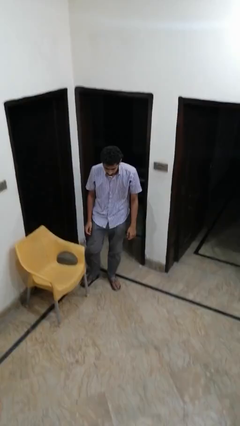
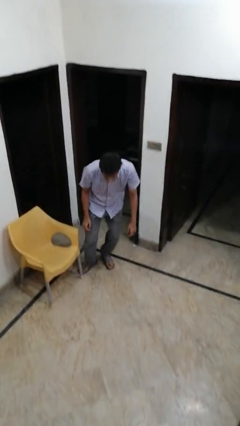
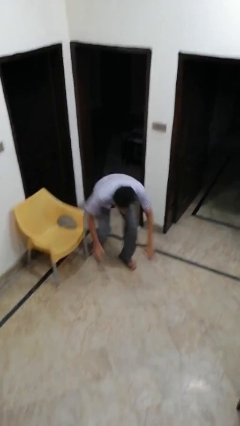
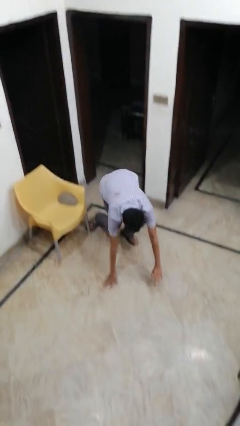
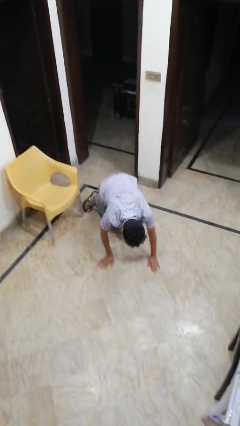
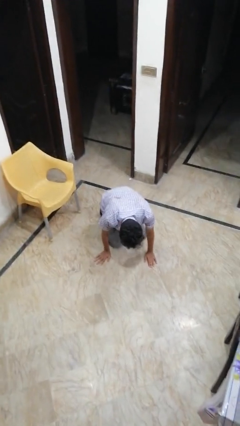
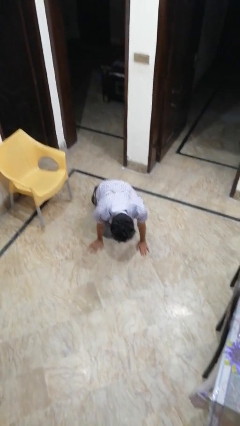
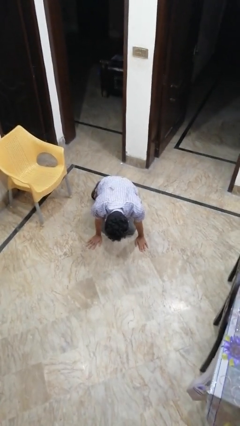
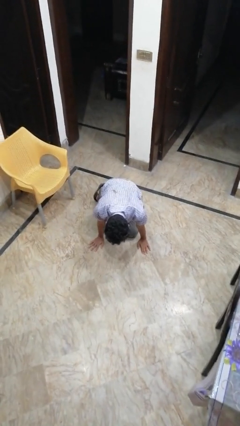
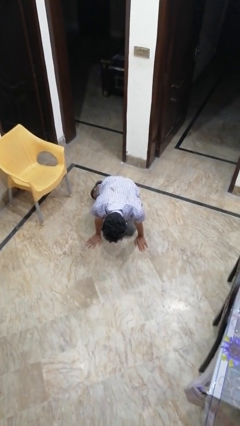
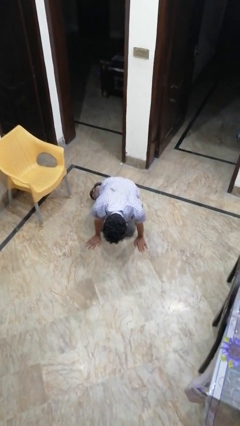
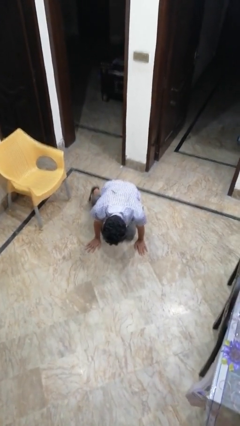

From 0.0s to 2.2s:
person trips on object on floor

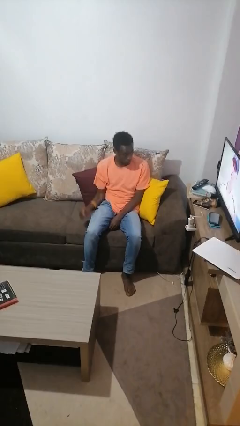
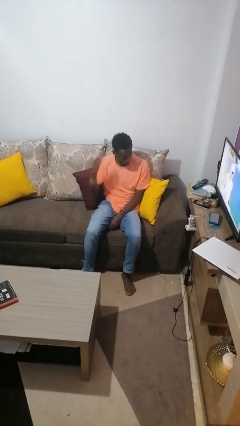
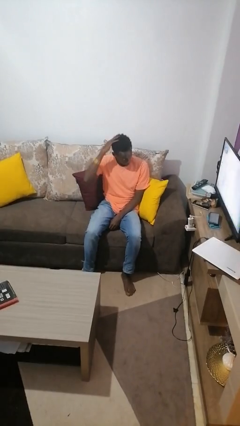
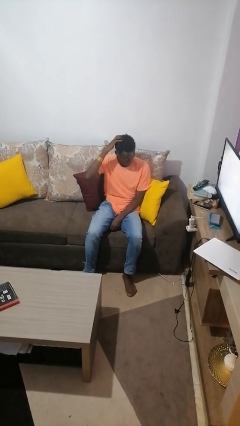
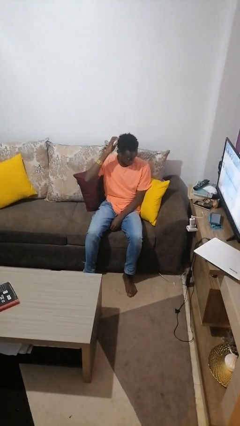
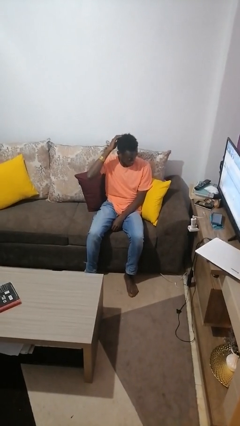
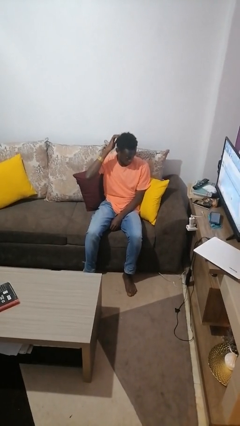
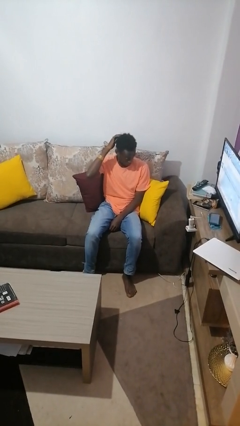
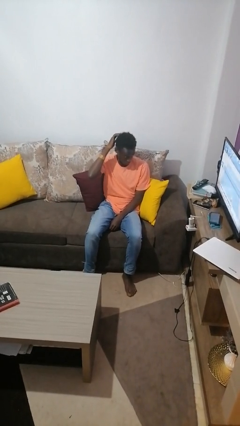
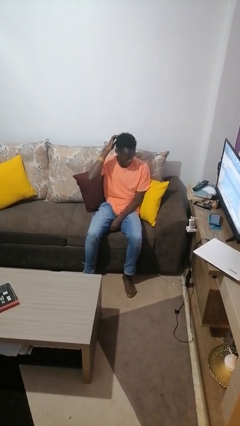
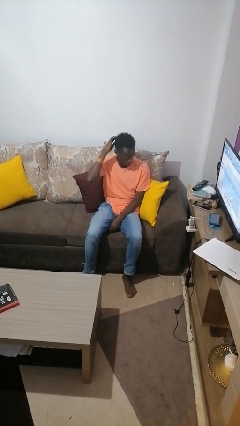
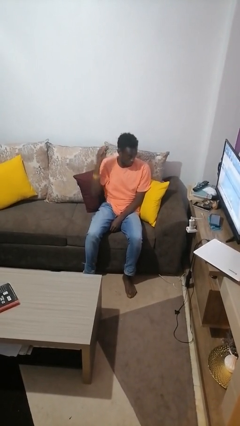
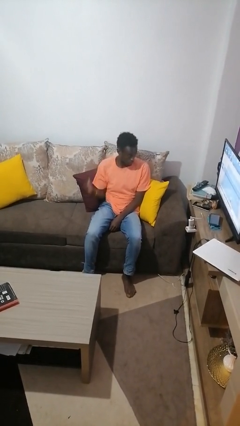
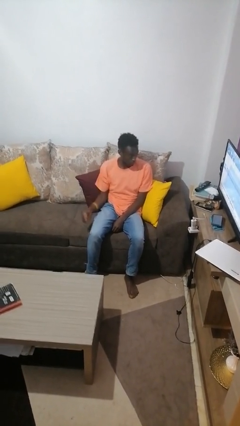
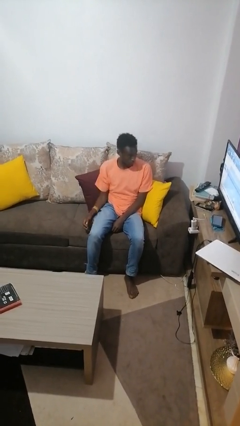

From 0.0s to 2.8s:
person strokes hair

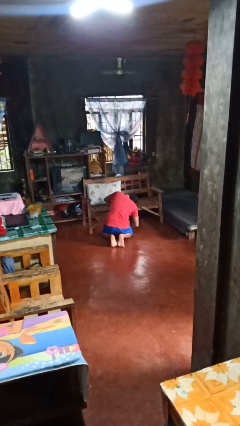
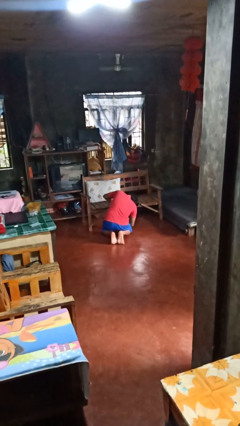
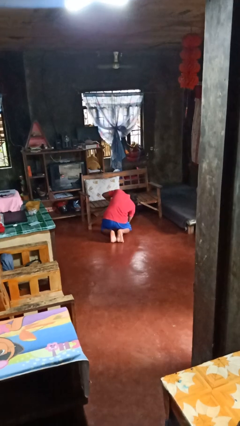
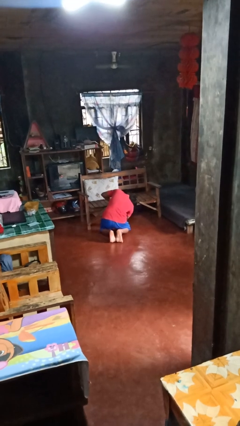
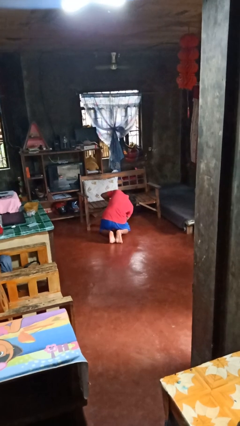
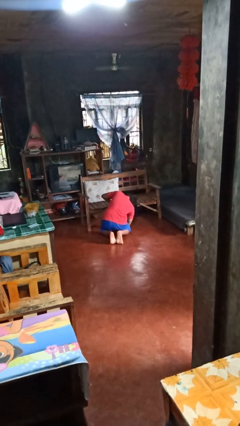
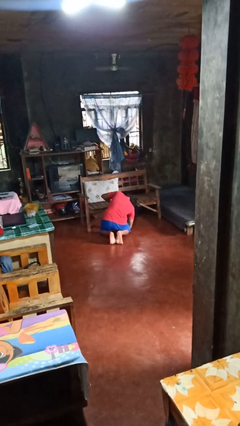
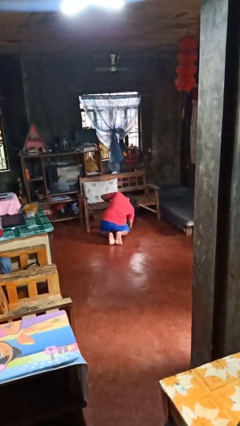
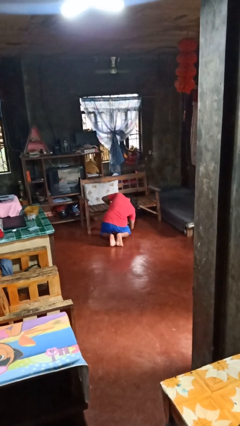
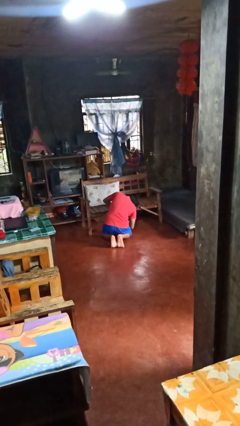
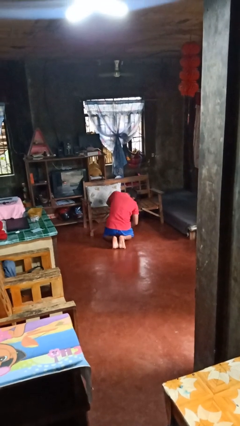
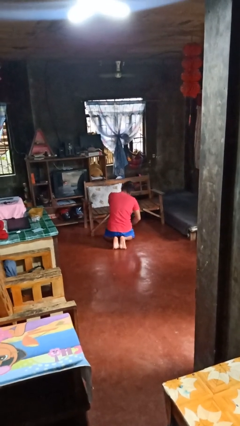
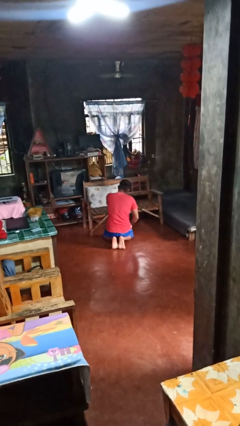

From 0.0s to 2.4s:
person searches under couch

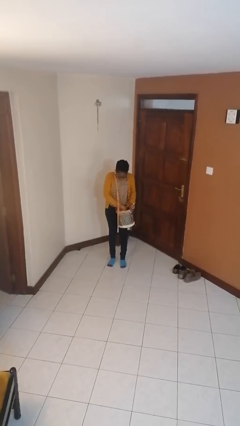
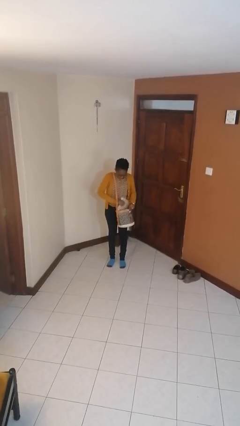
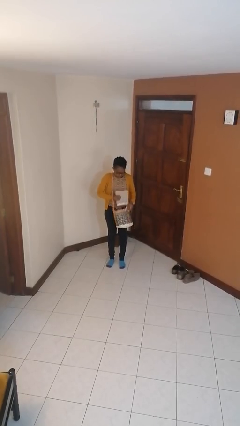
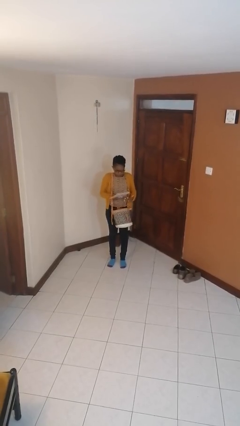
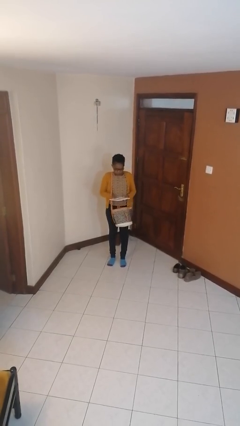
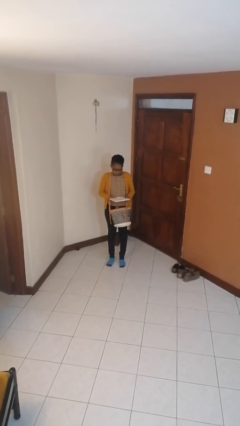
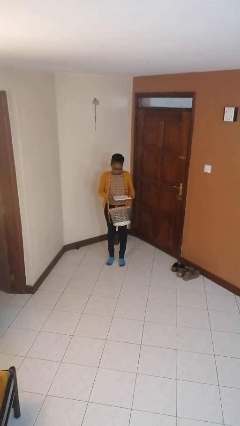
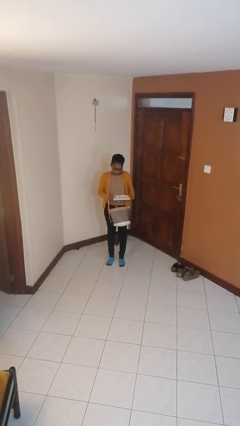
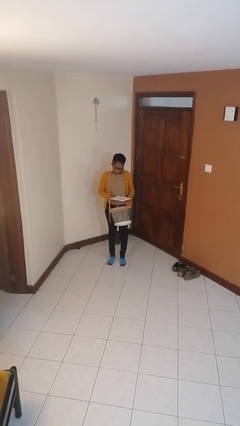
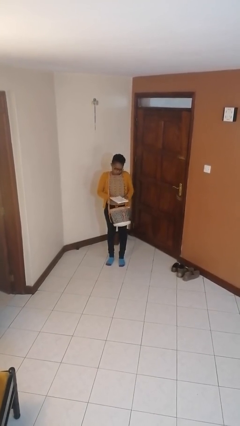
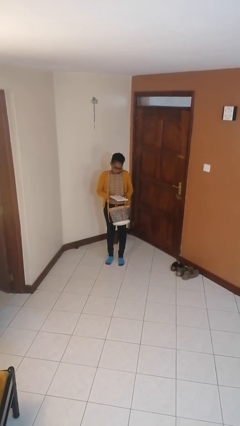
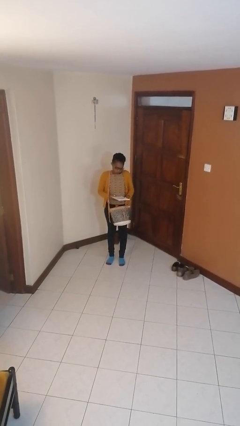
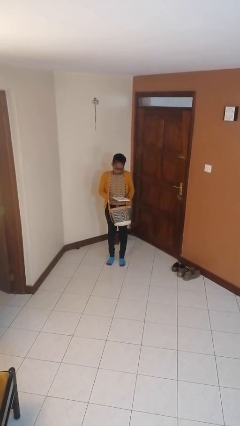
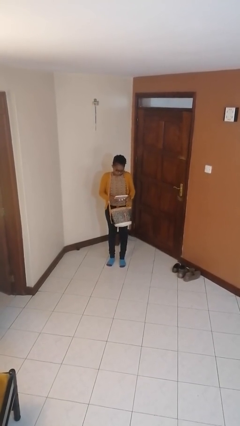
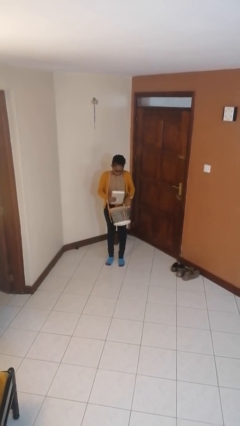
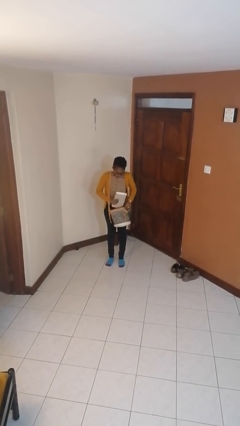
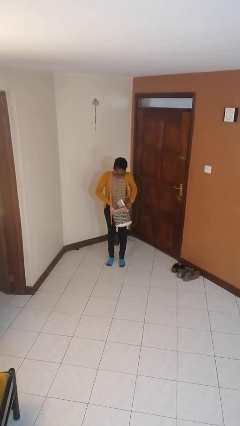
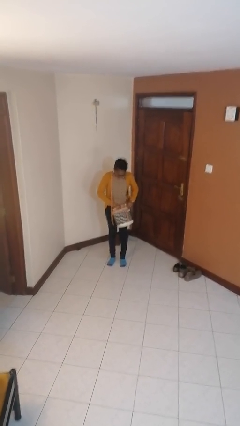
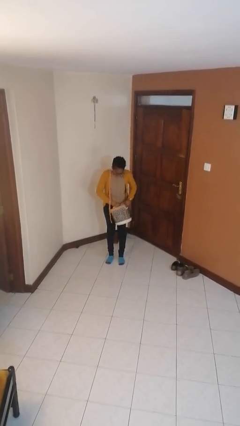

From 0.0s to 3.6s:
person takes object from purse

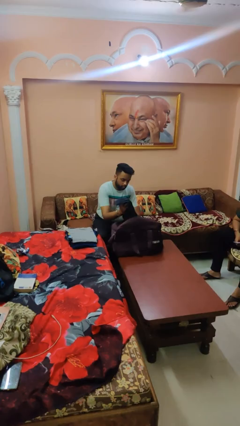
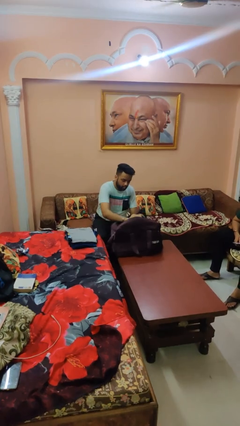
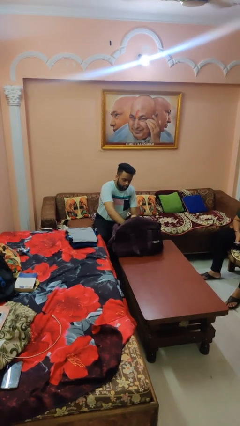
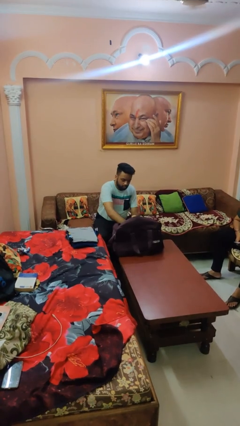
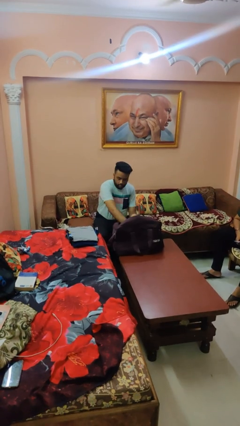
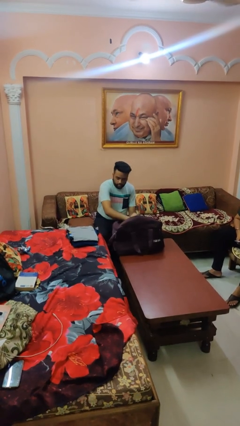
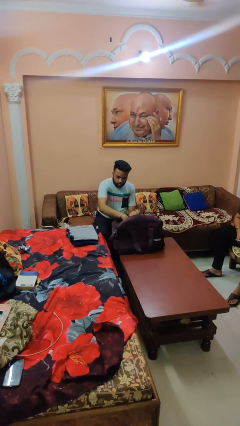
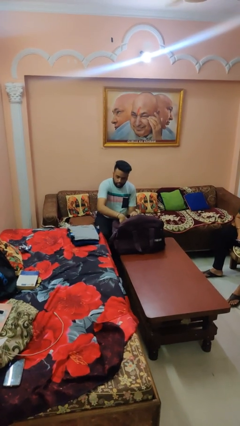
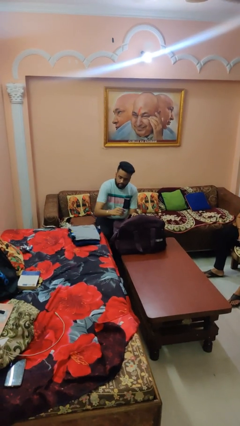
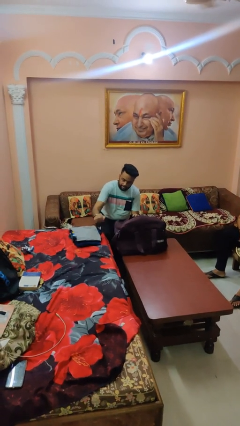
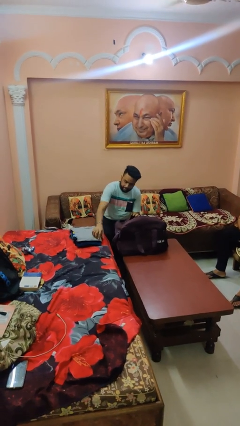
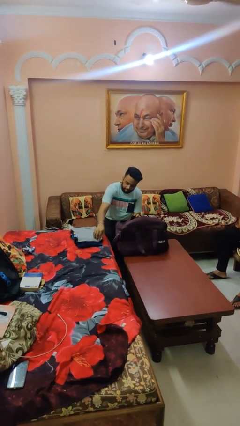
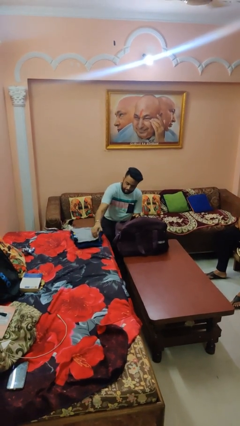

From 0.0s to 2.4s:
person loads clothes into suitcase

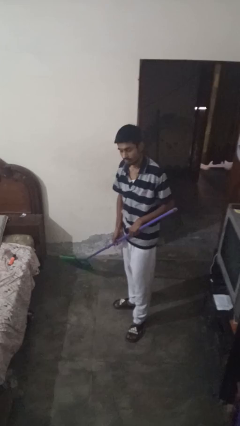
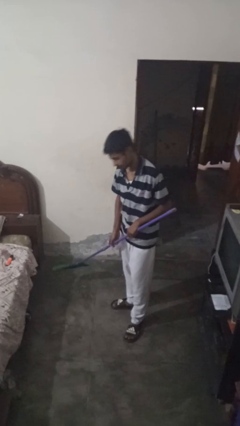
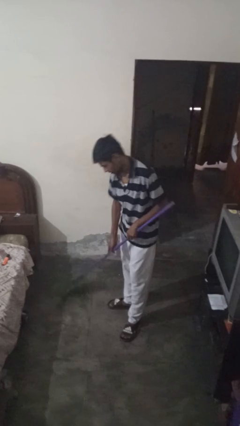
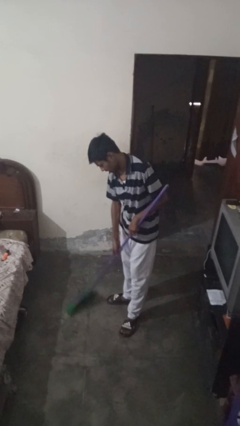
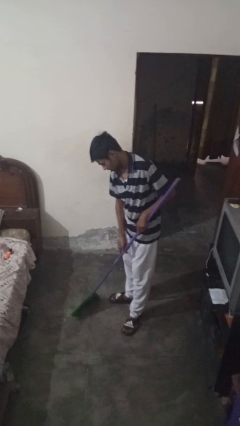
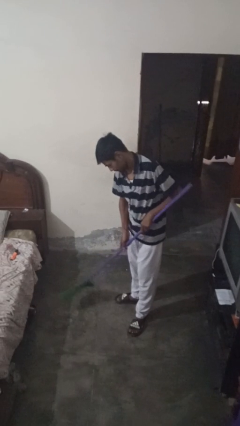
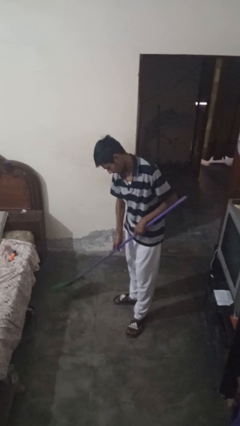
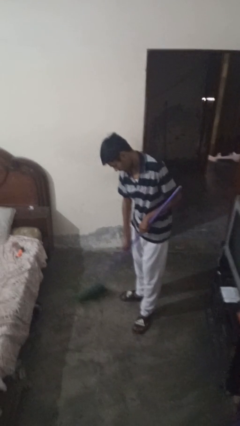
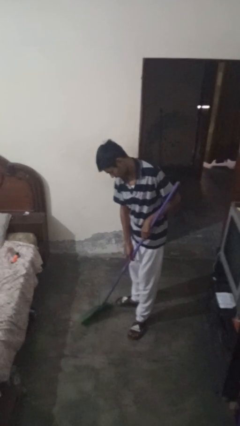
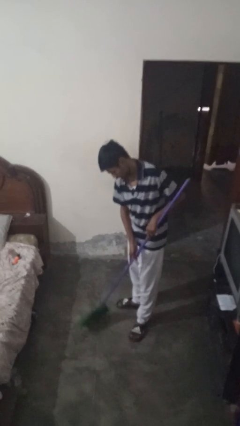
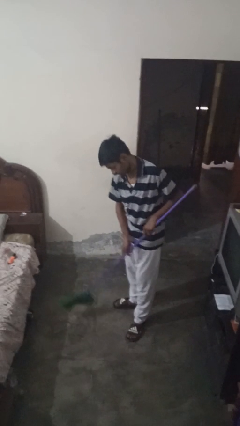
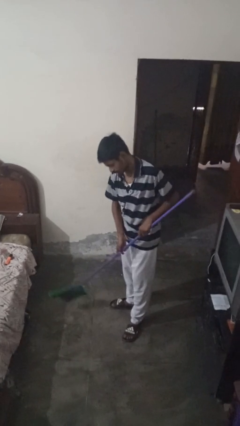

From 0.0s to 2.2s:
person sweeps floor

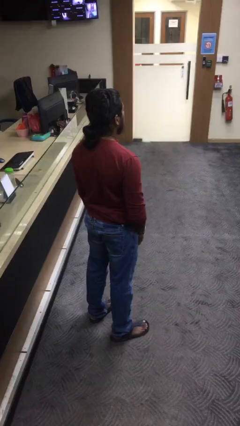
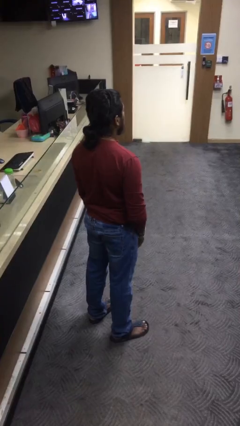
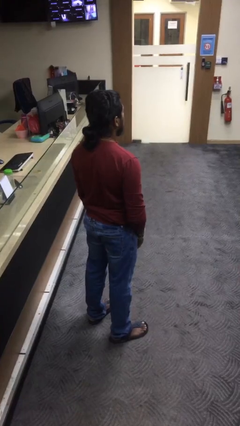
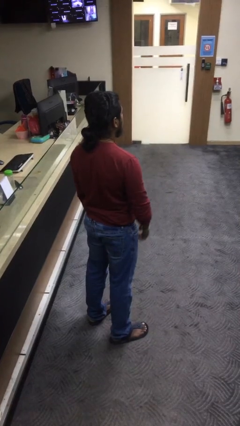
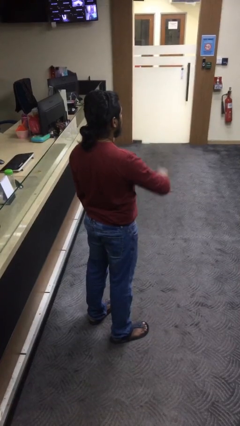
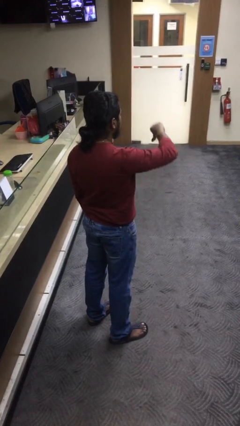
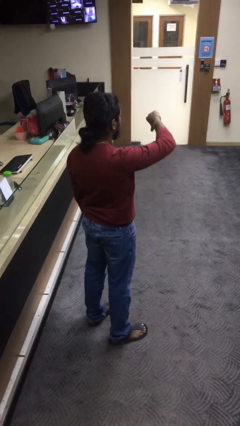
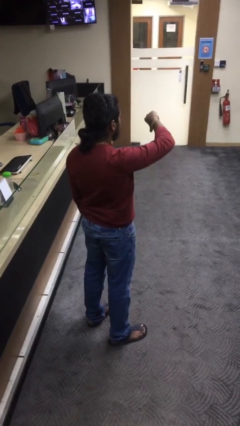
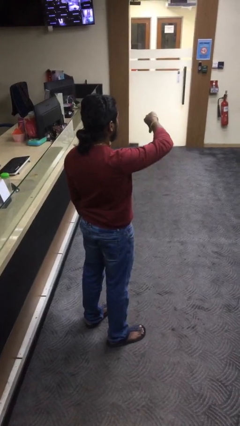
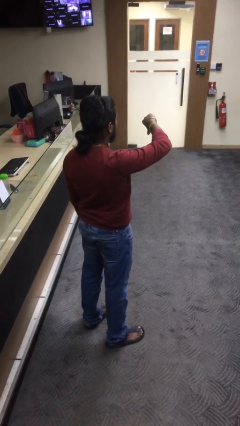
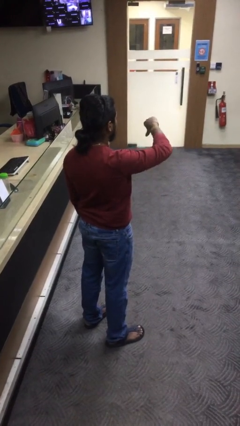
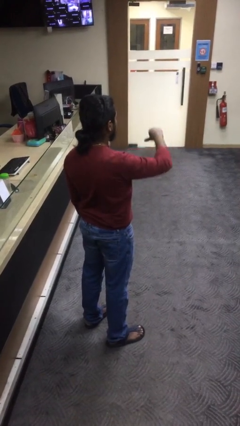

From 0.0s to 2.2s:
person gestures thumbs down
